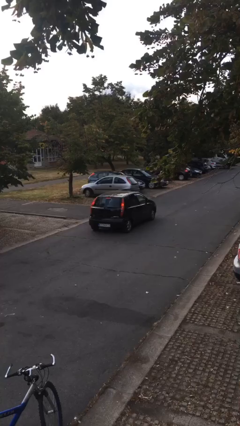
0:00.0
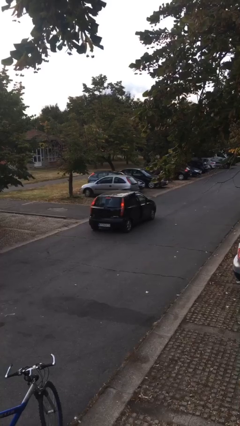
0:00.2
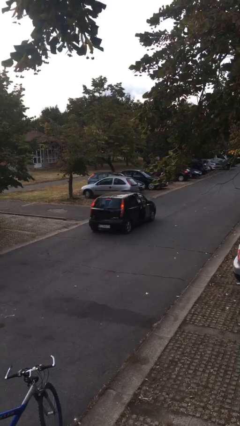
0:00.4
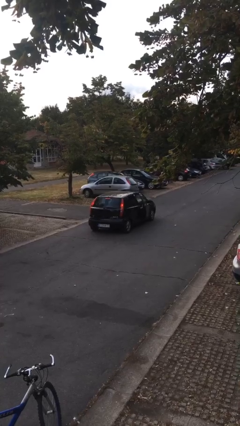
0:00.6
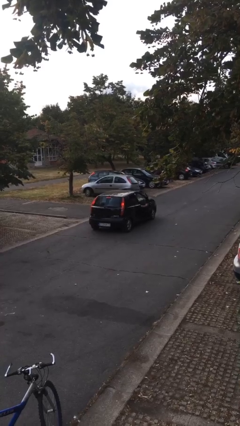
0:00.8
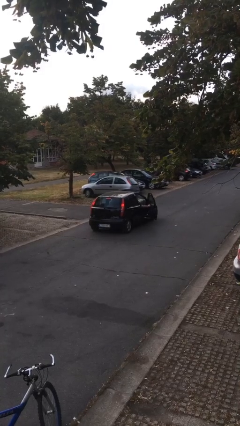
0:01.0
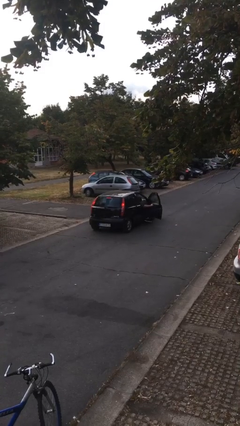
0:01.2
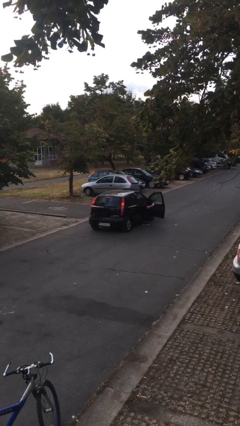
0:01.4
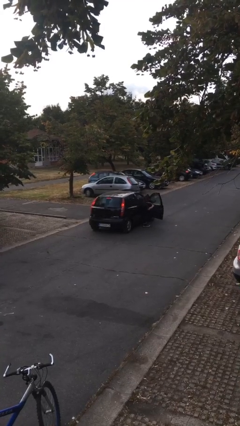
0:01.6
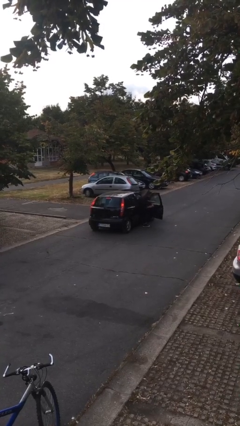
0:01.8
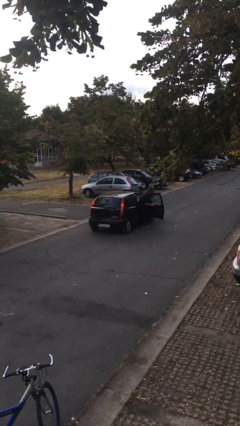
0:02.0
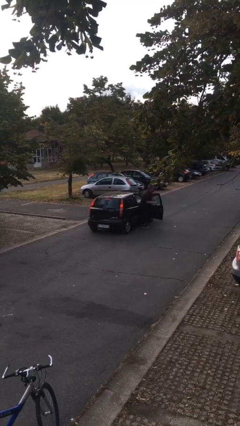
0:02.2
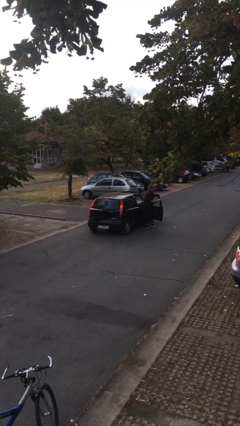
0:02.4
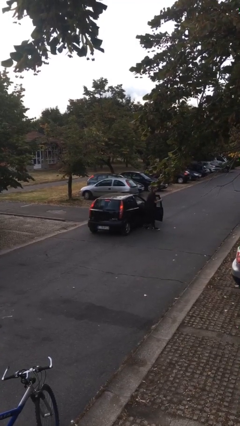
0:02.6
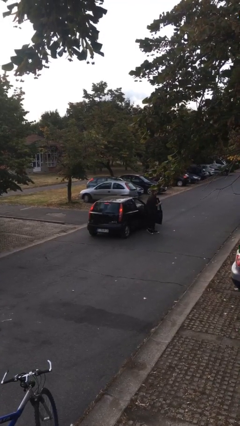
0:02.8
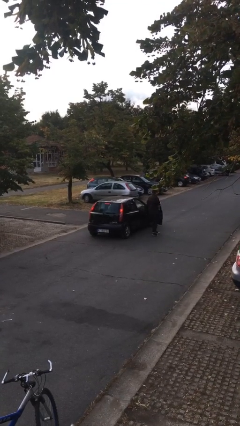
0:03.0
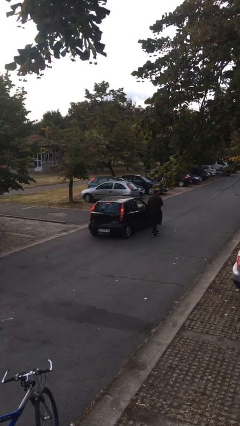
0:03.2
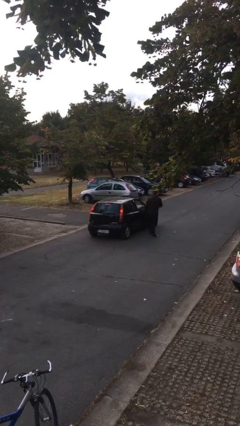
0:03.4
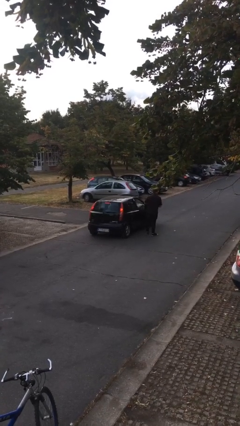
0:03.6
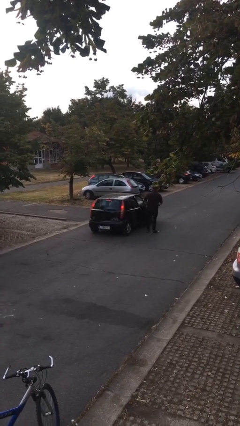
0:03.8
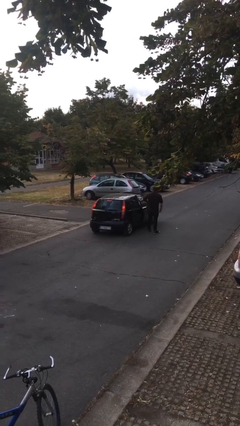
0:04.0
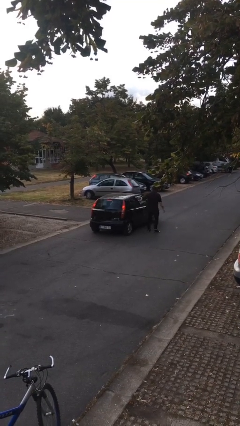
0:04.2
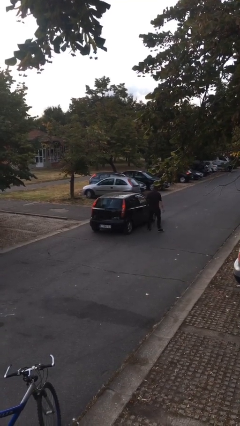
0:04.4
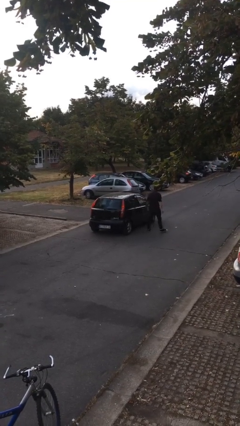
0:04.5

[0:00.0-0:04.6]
car drops off person

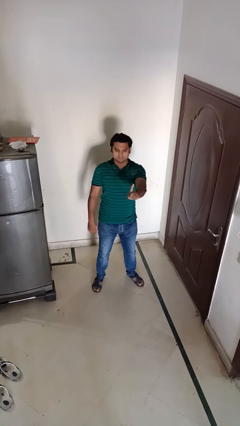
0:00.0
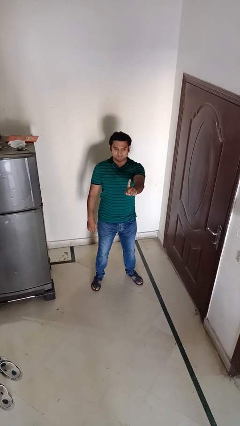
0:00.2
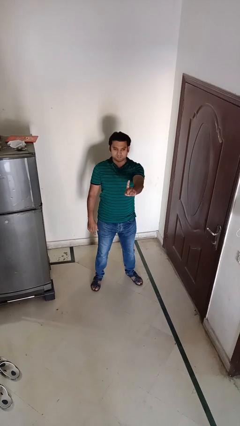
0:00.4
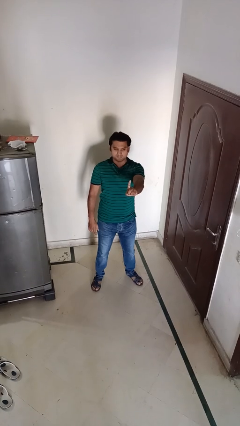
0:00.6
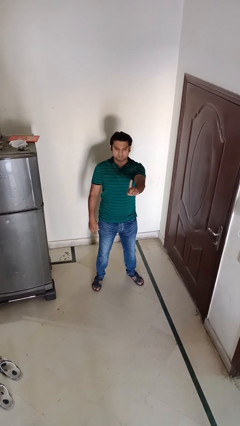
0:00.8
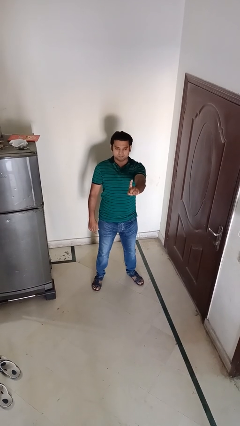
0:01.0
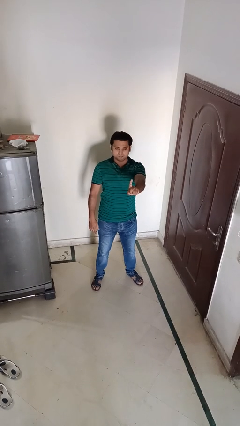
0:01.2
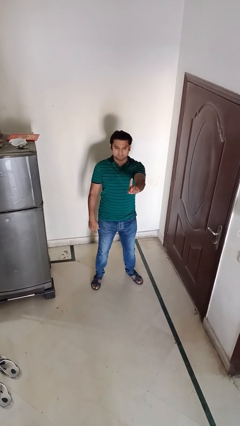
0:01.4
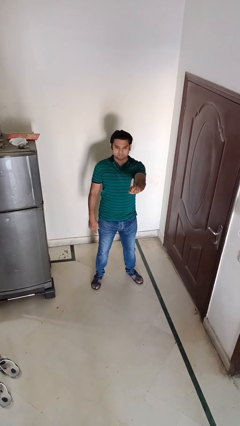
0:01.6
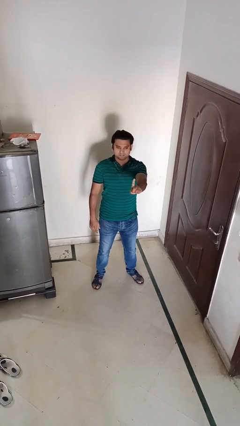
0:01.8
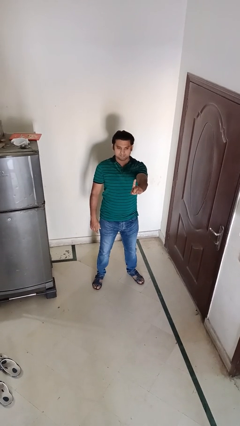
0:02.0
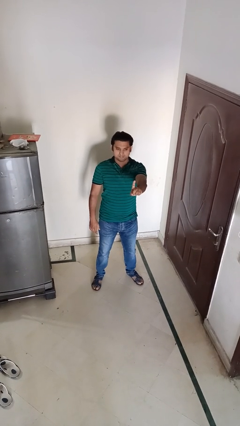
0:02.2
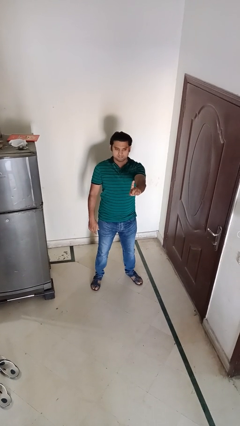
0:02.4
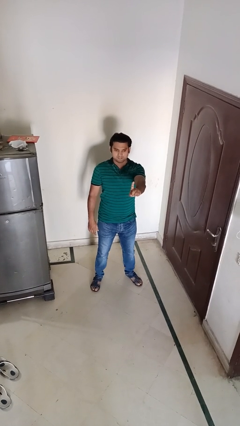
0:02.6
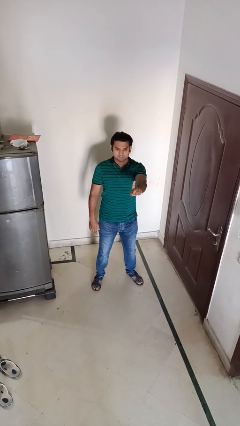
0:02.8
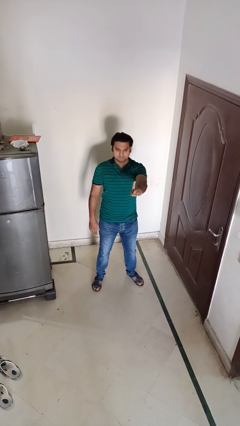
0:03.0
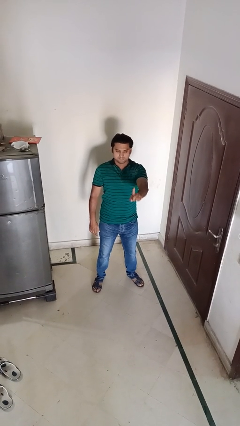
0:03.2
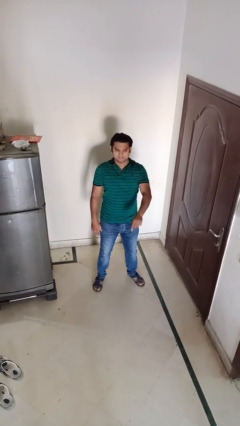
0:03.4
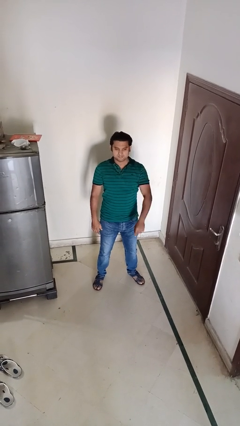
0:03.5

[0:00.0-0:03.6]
person gestures number one

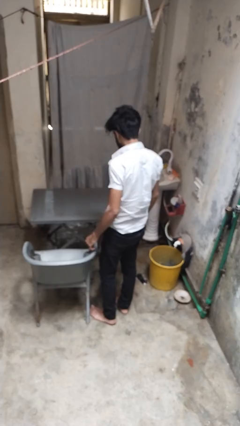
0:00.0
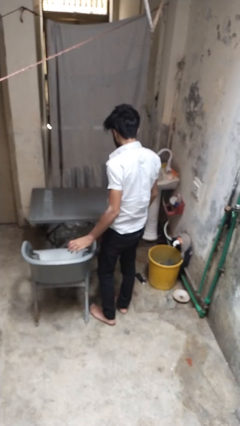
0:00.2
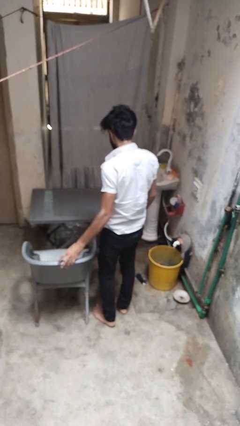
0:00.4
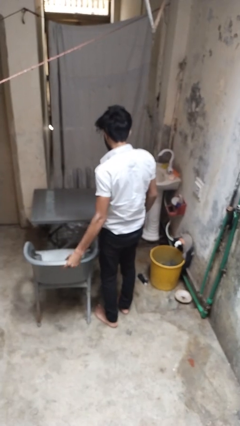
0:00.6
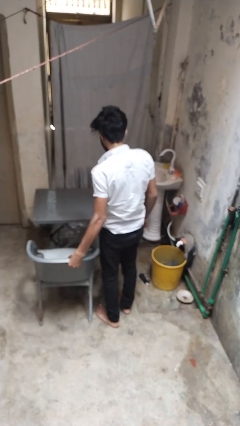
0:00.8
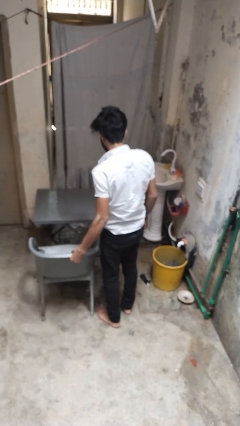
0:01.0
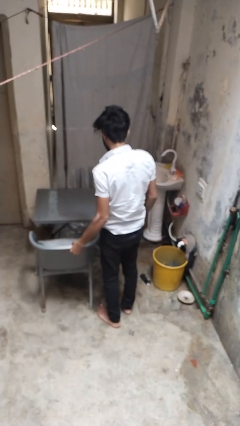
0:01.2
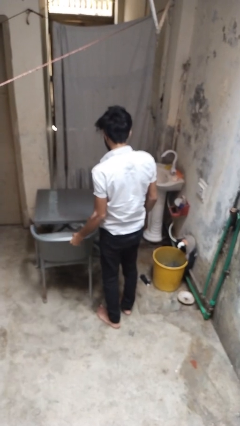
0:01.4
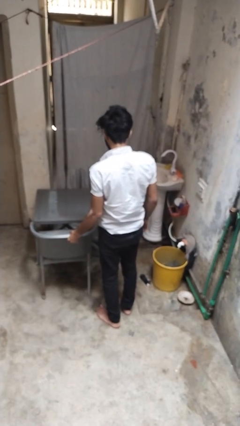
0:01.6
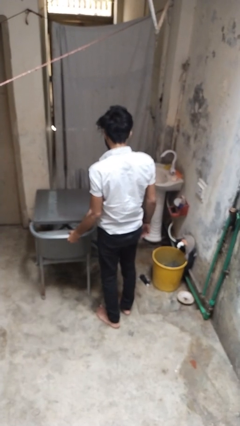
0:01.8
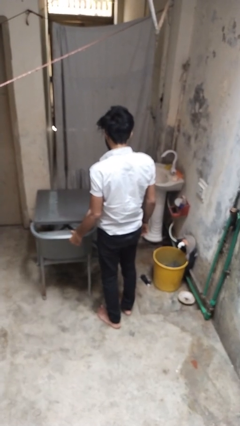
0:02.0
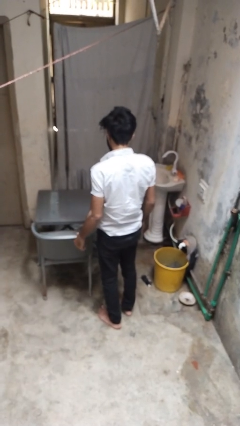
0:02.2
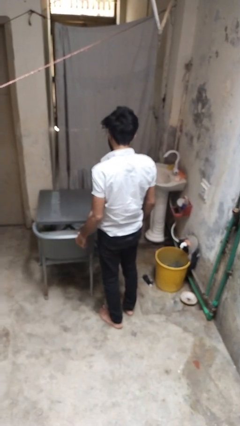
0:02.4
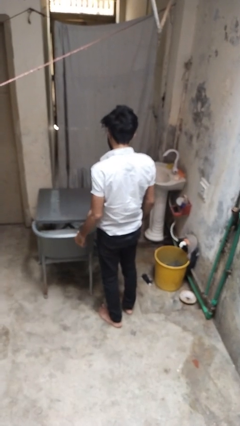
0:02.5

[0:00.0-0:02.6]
person pushes in chair

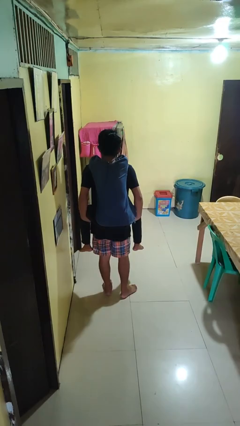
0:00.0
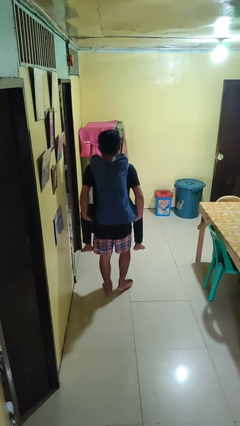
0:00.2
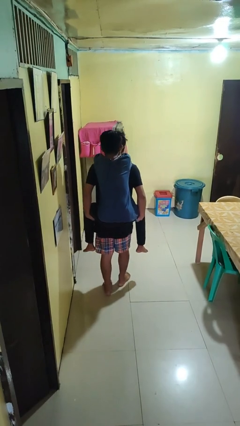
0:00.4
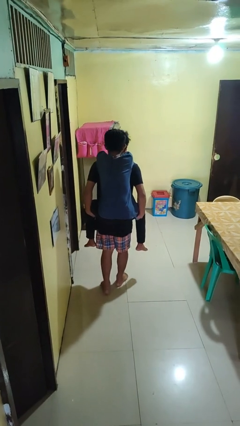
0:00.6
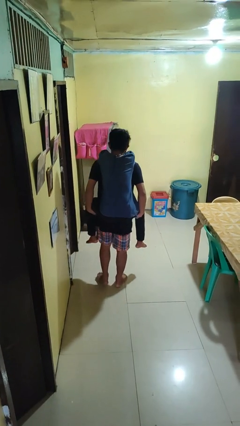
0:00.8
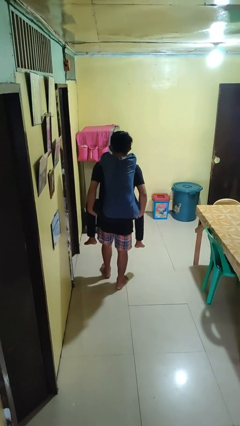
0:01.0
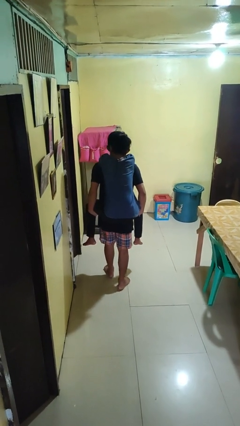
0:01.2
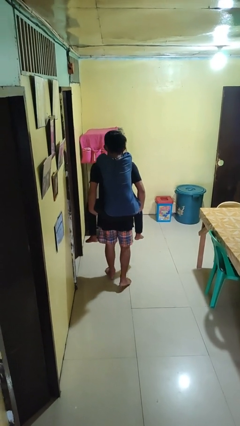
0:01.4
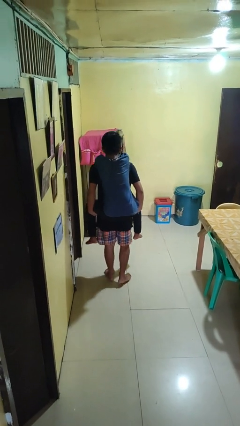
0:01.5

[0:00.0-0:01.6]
person carries person on back

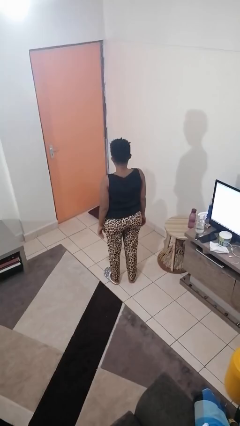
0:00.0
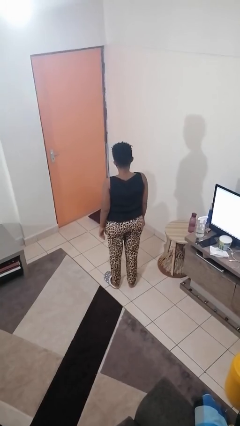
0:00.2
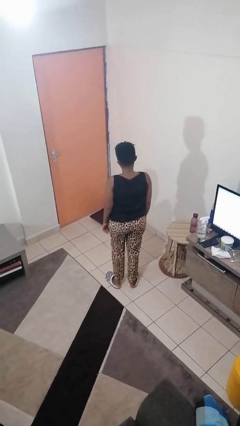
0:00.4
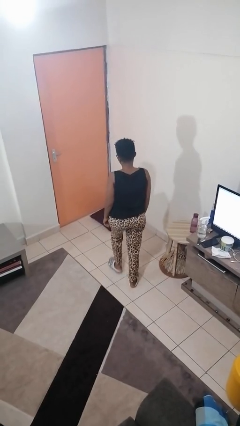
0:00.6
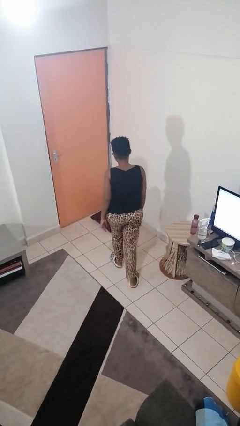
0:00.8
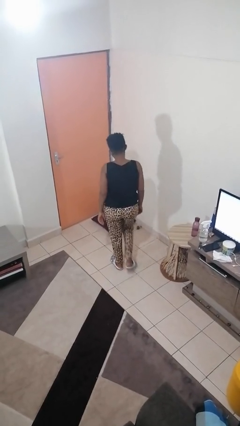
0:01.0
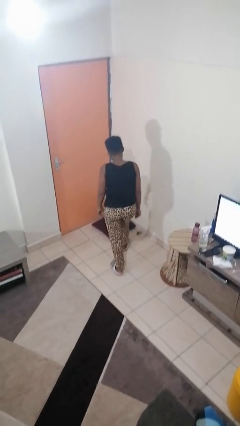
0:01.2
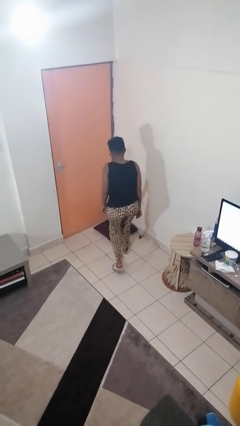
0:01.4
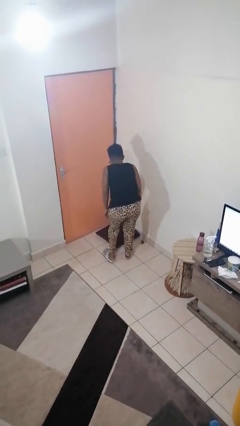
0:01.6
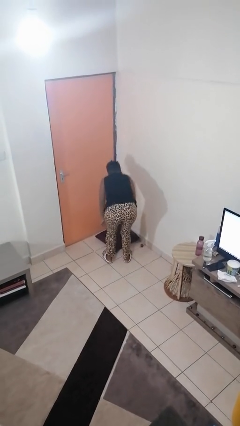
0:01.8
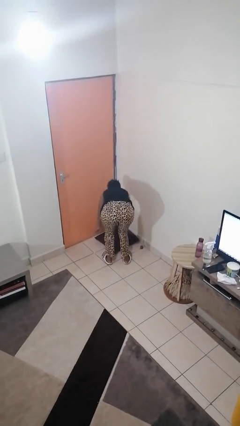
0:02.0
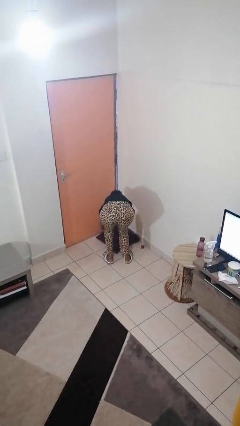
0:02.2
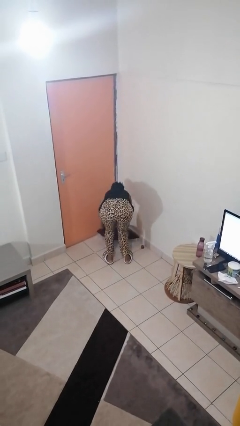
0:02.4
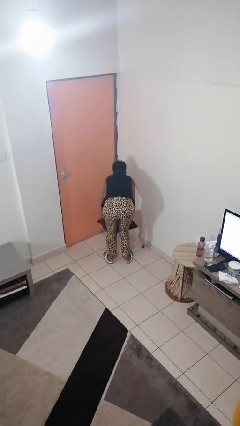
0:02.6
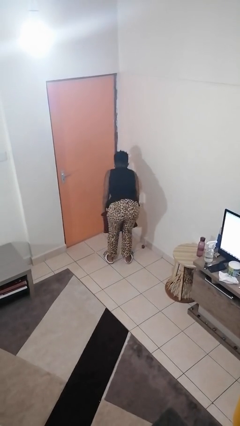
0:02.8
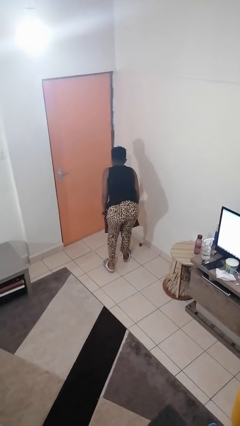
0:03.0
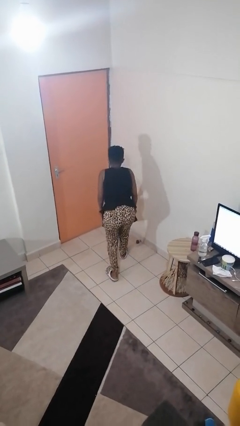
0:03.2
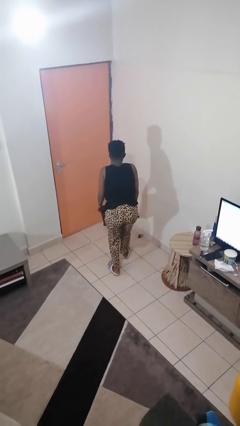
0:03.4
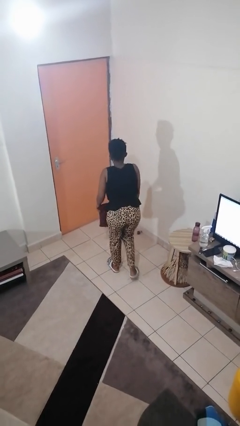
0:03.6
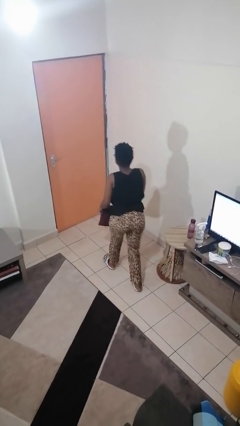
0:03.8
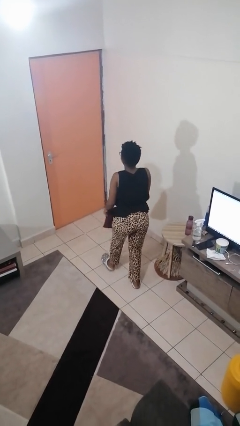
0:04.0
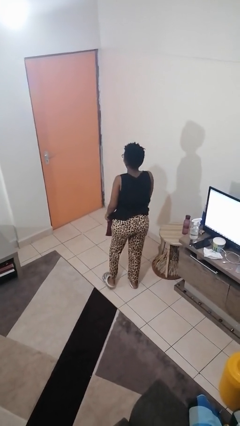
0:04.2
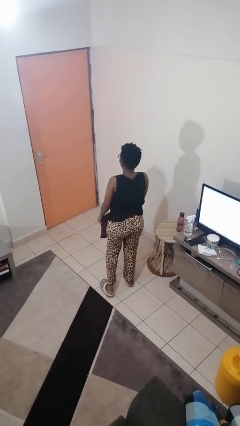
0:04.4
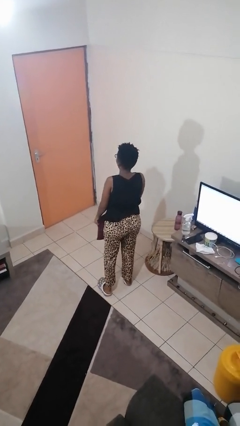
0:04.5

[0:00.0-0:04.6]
person picks up object from floor

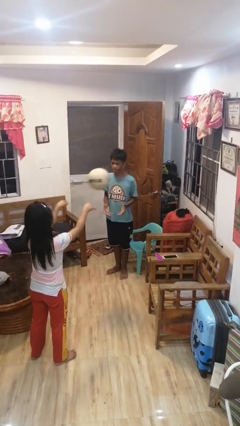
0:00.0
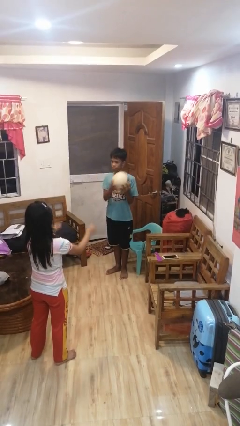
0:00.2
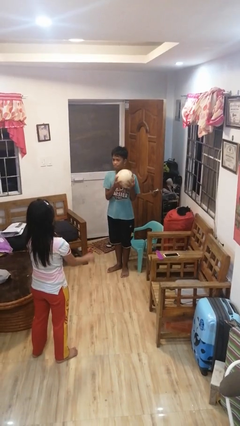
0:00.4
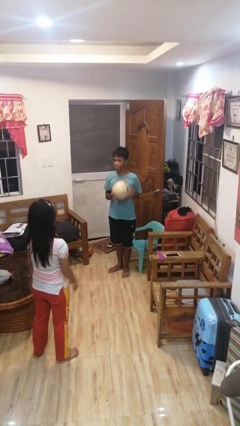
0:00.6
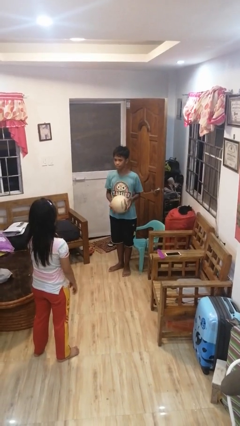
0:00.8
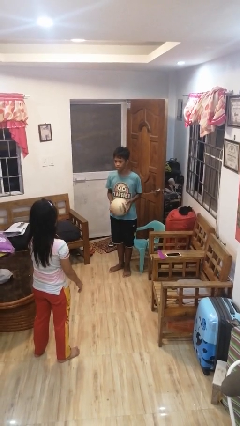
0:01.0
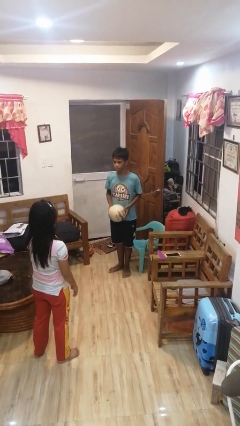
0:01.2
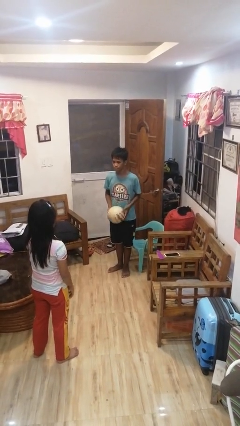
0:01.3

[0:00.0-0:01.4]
person catches object from person
